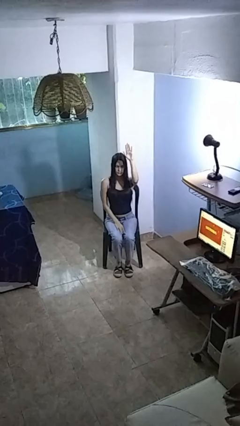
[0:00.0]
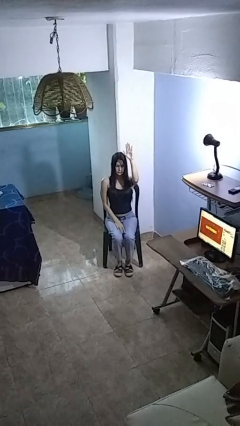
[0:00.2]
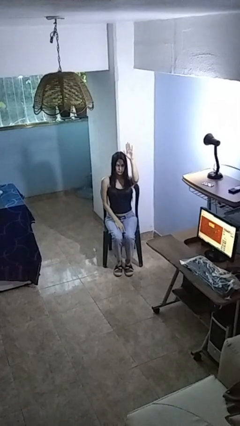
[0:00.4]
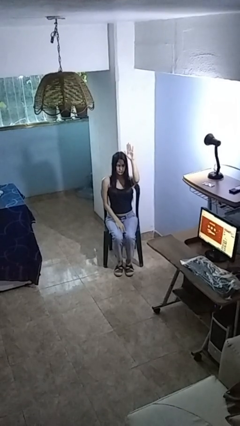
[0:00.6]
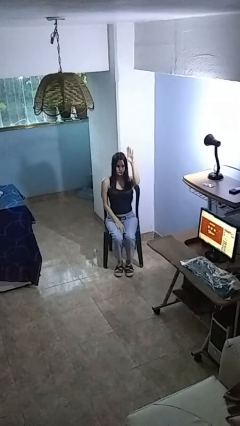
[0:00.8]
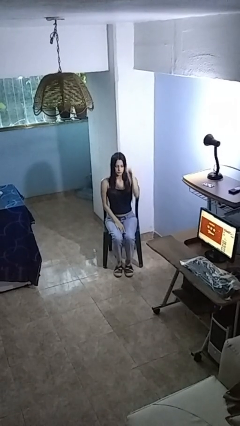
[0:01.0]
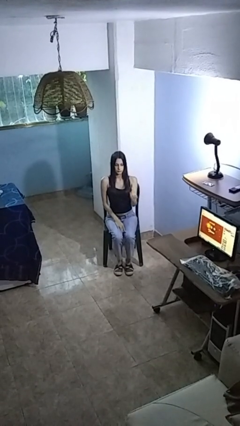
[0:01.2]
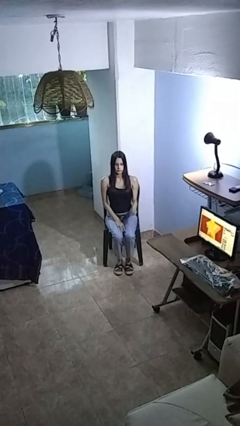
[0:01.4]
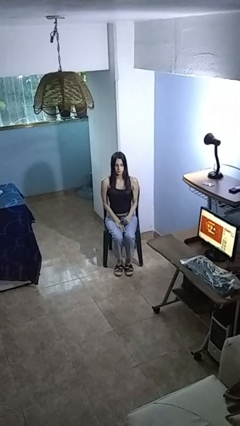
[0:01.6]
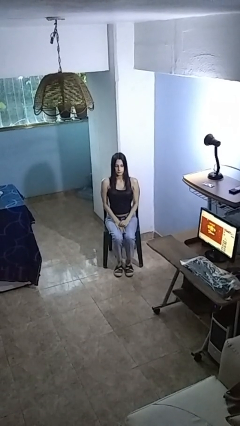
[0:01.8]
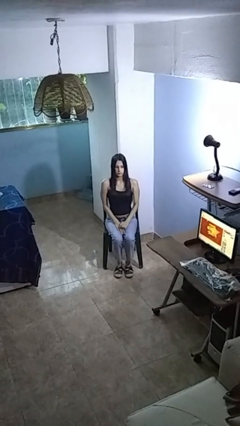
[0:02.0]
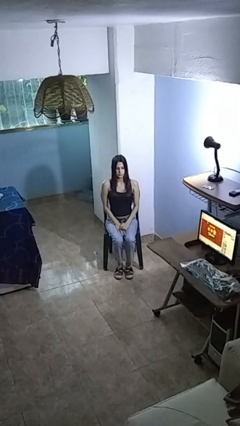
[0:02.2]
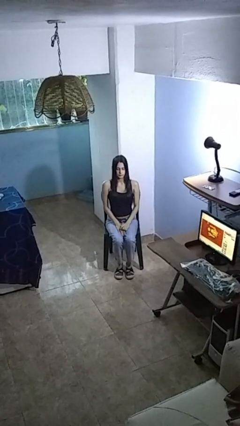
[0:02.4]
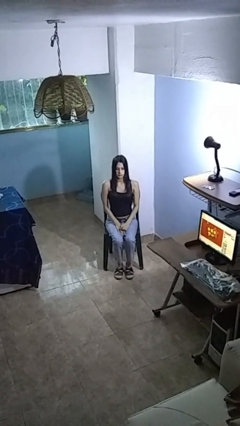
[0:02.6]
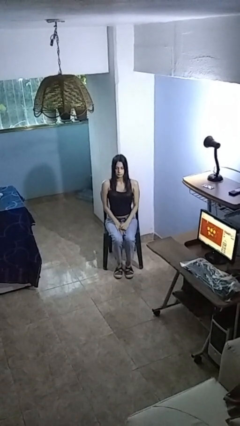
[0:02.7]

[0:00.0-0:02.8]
person gestures lower hand

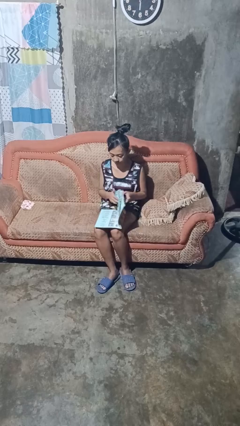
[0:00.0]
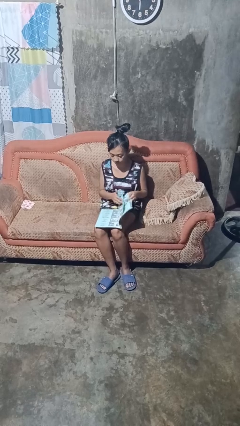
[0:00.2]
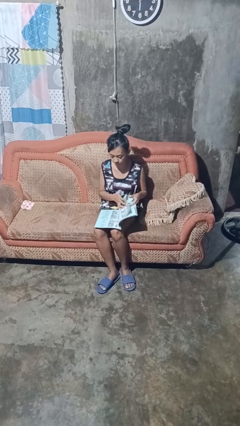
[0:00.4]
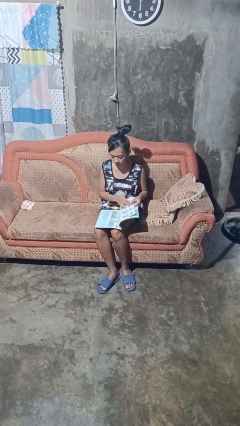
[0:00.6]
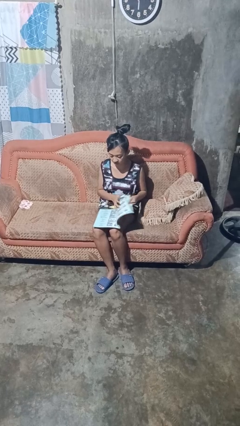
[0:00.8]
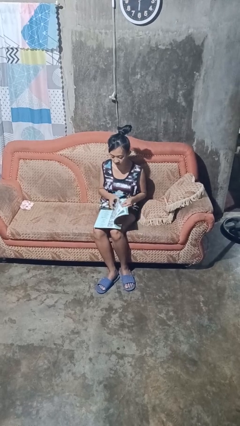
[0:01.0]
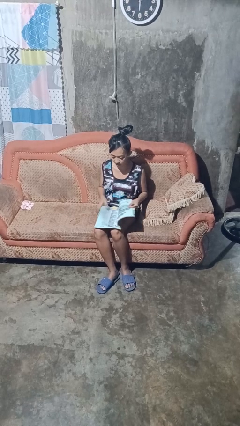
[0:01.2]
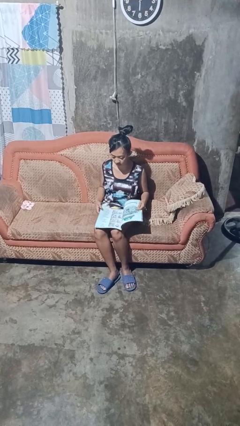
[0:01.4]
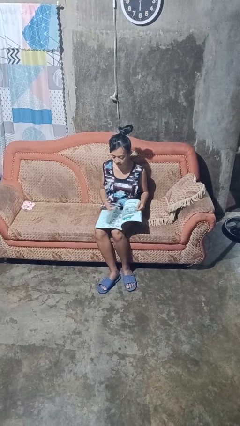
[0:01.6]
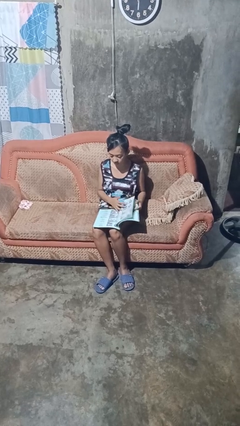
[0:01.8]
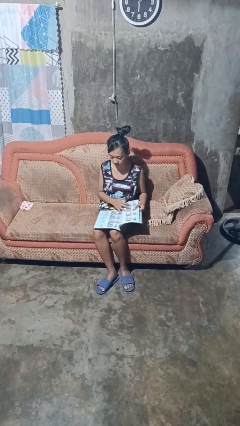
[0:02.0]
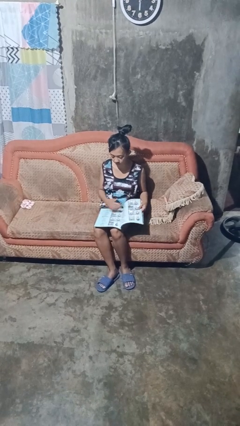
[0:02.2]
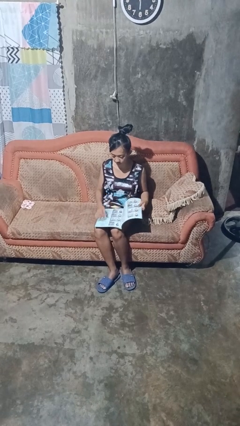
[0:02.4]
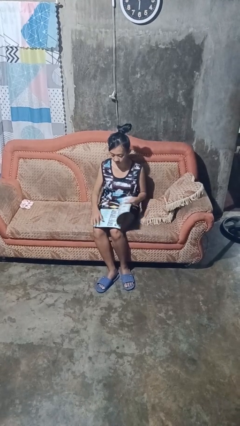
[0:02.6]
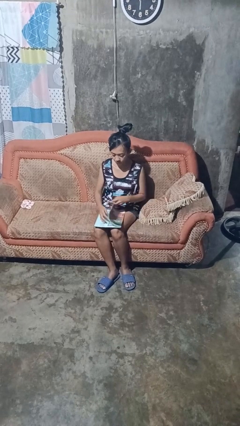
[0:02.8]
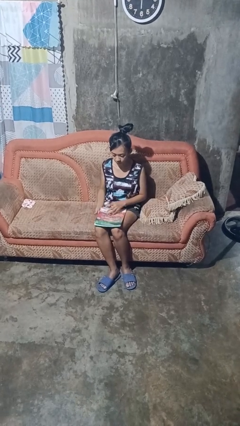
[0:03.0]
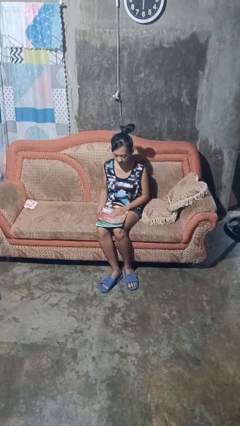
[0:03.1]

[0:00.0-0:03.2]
person reads magazine

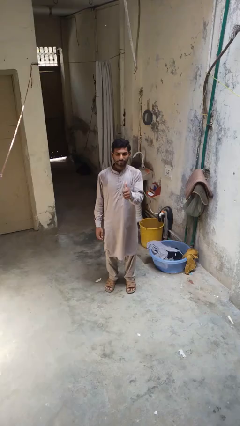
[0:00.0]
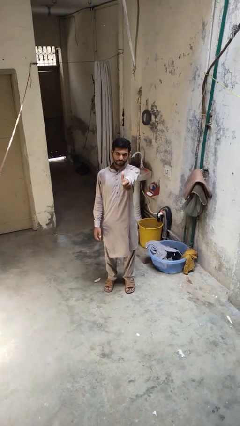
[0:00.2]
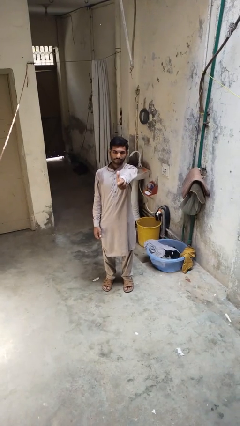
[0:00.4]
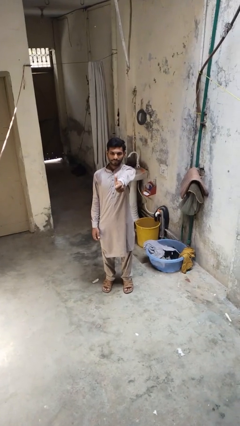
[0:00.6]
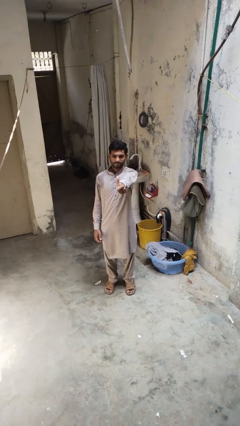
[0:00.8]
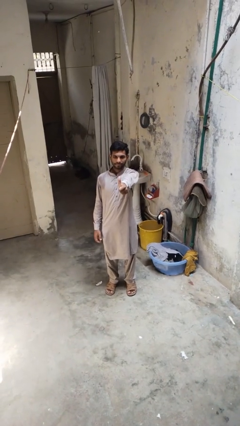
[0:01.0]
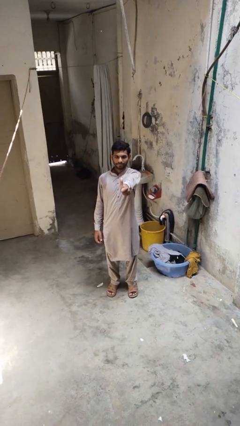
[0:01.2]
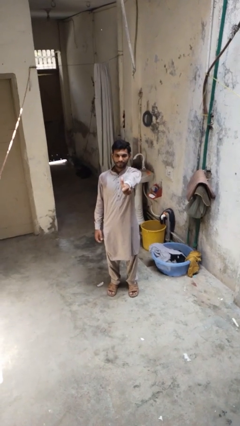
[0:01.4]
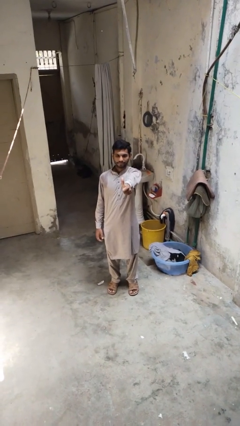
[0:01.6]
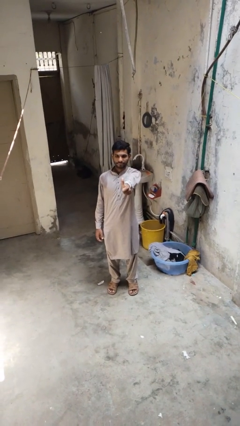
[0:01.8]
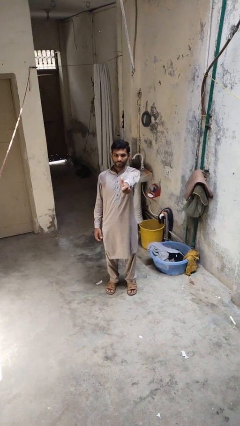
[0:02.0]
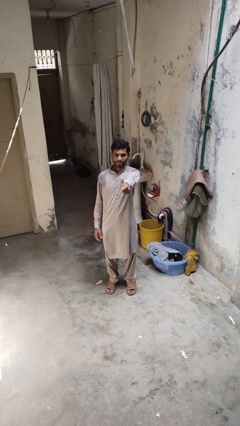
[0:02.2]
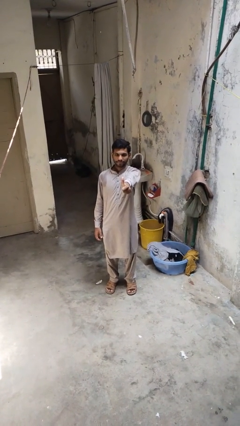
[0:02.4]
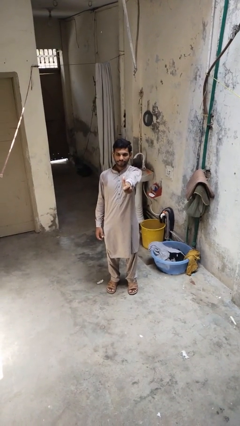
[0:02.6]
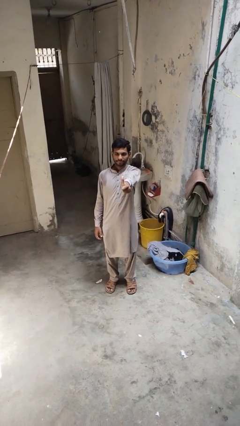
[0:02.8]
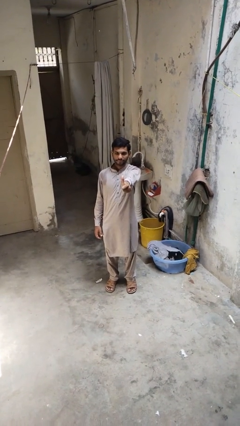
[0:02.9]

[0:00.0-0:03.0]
person gestures thumbs up

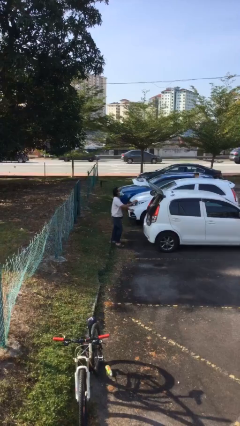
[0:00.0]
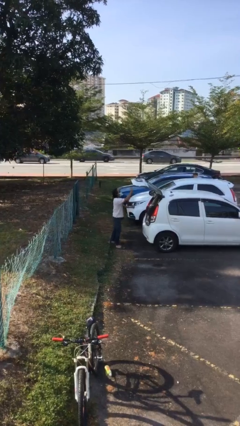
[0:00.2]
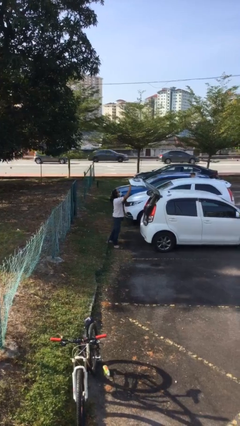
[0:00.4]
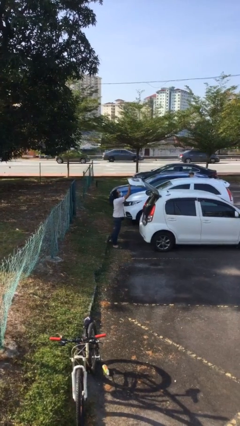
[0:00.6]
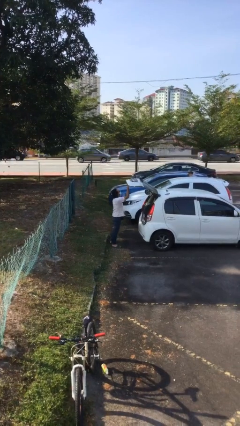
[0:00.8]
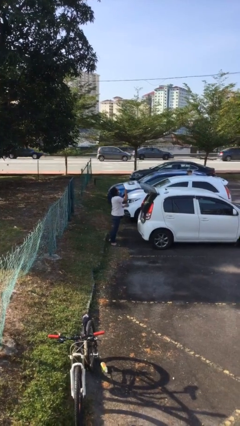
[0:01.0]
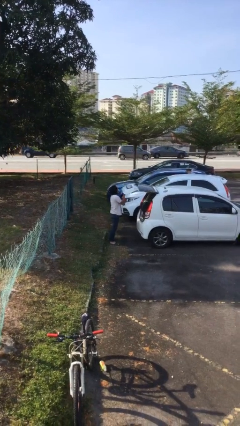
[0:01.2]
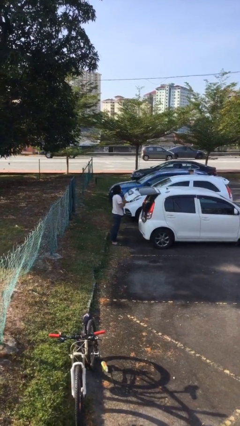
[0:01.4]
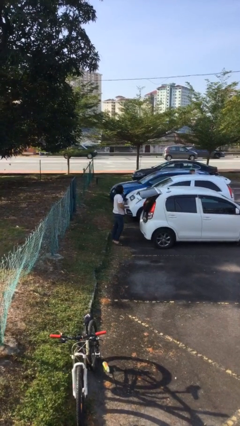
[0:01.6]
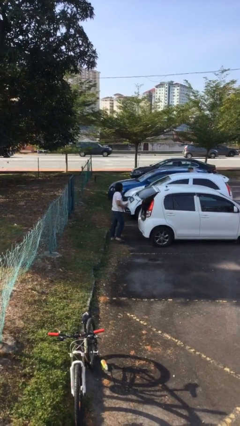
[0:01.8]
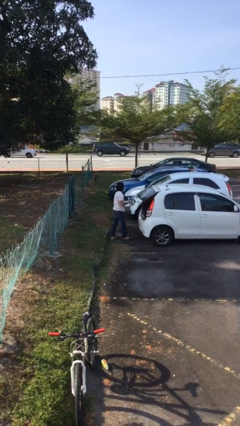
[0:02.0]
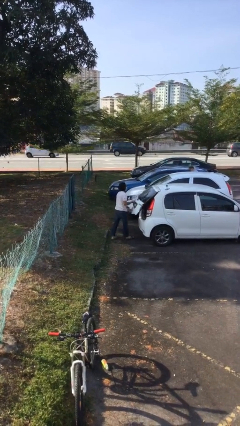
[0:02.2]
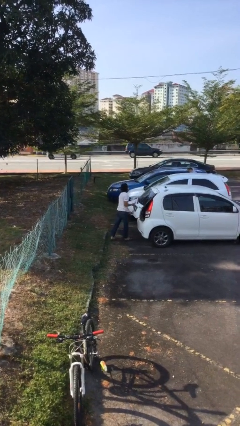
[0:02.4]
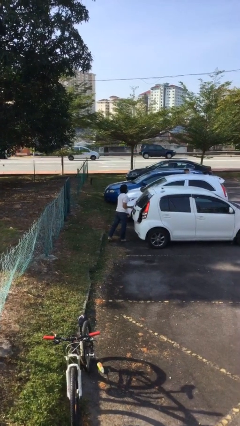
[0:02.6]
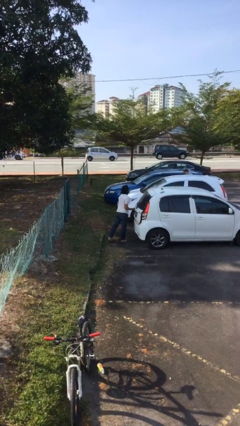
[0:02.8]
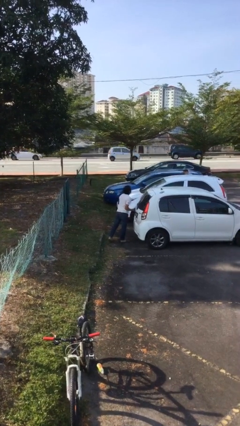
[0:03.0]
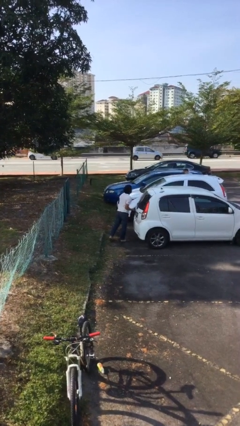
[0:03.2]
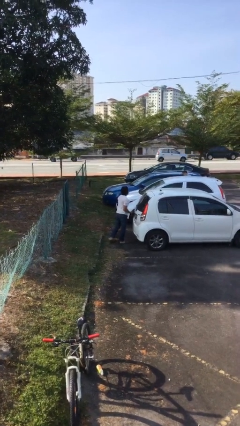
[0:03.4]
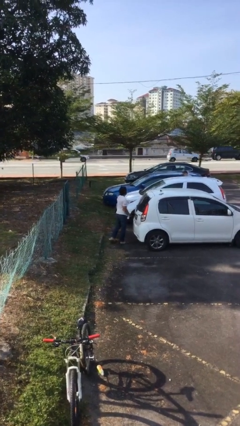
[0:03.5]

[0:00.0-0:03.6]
person closes car trunk

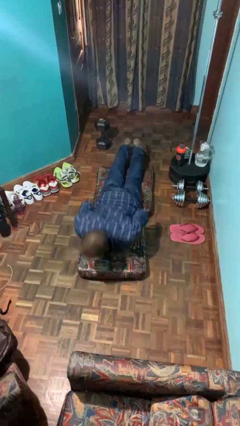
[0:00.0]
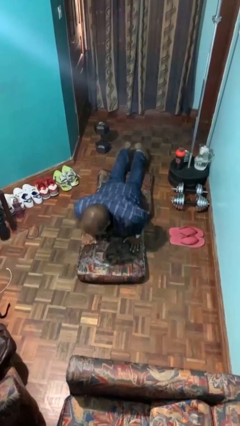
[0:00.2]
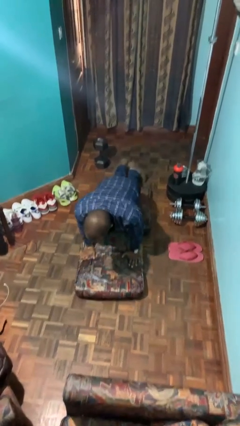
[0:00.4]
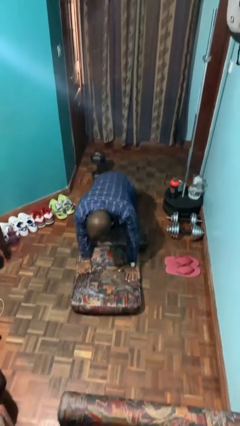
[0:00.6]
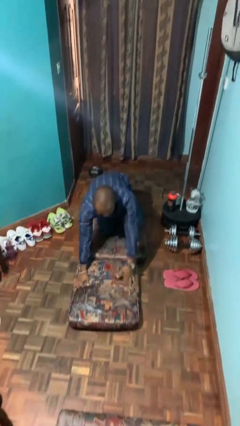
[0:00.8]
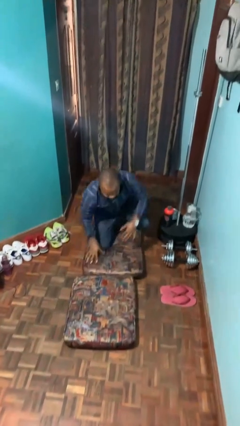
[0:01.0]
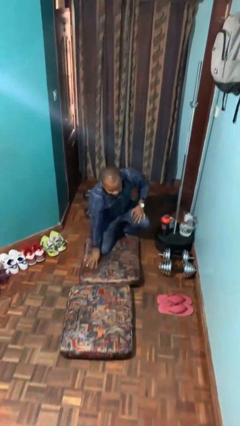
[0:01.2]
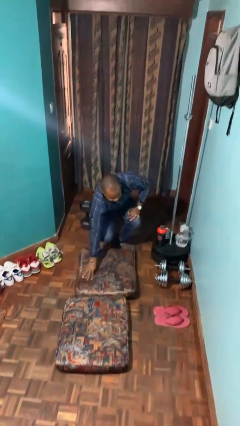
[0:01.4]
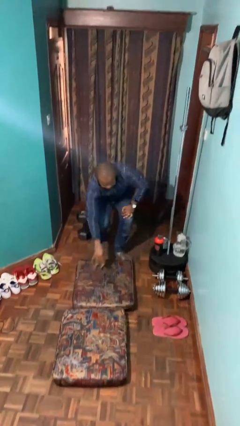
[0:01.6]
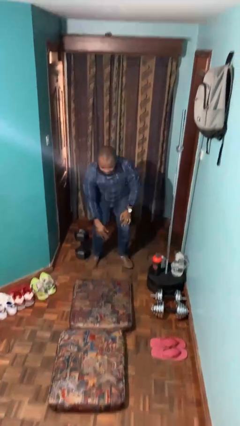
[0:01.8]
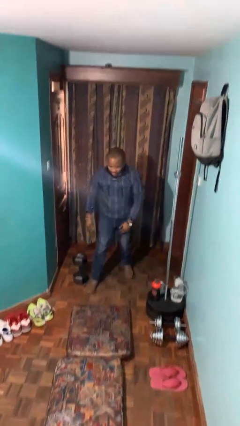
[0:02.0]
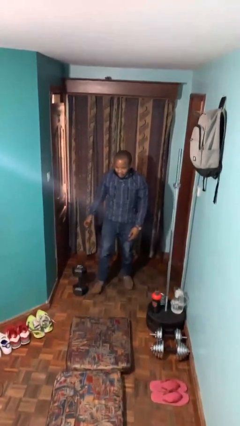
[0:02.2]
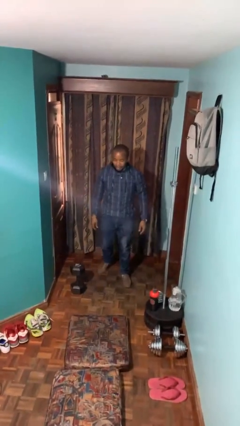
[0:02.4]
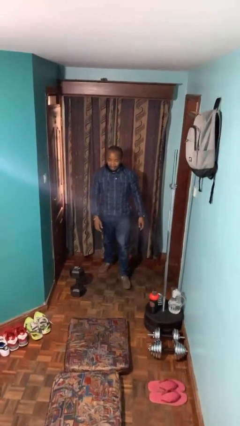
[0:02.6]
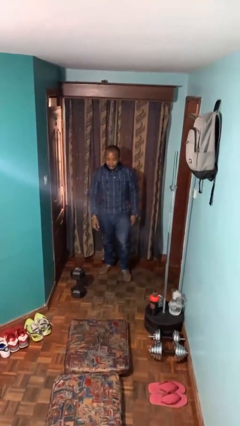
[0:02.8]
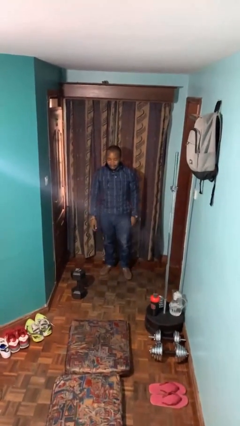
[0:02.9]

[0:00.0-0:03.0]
person stands up from floor

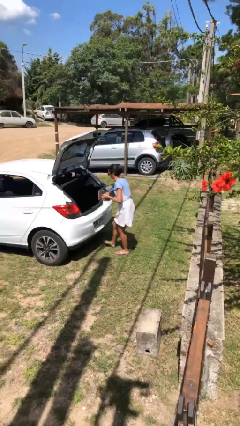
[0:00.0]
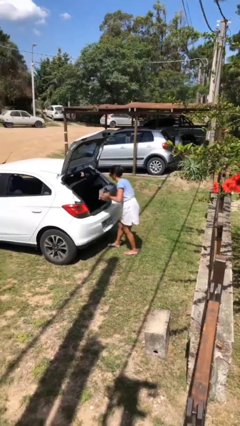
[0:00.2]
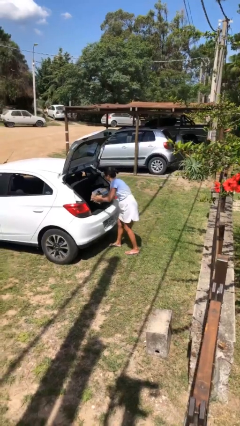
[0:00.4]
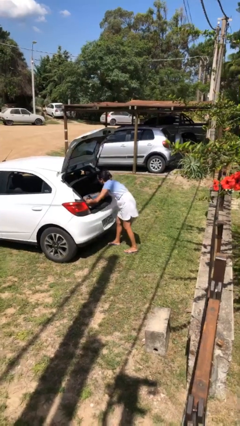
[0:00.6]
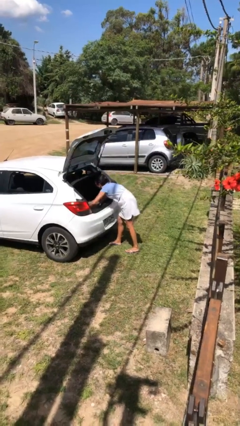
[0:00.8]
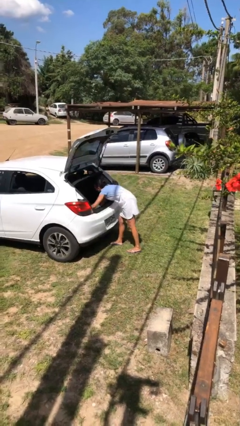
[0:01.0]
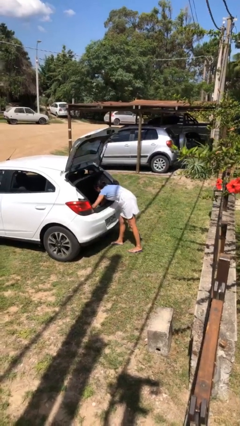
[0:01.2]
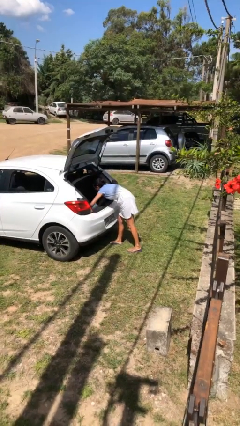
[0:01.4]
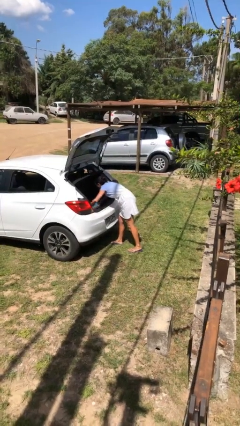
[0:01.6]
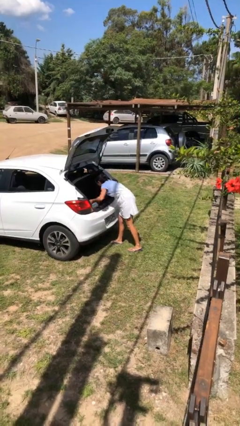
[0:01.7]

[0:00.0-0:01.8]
person loads car

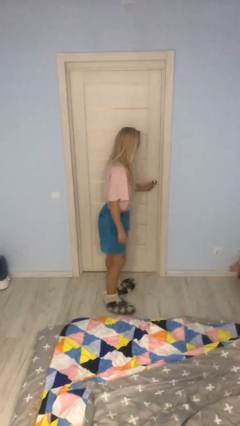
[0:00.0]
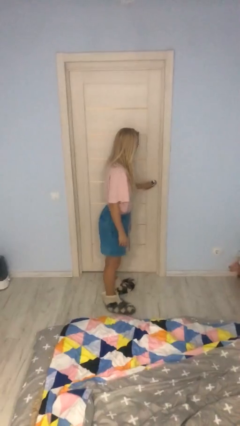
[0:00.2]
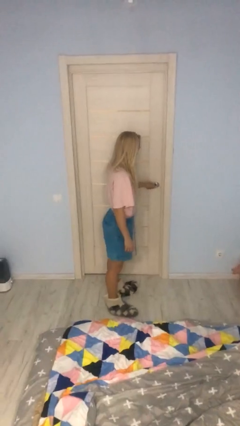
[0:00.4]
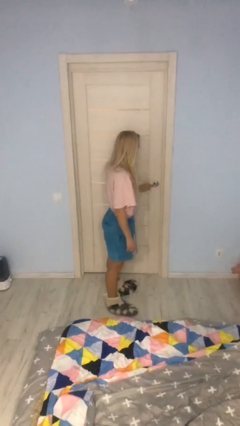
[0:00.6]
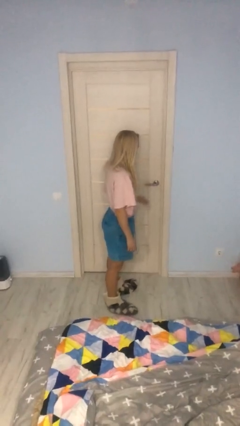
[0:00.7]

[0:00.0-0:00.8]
person closes facility door
